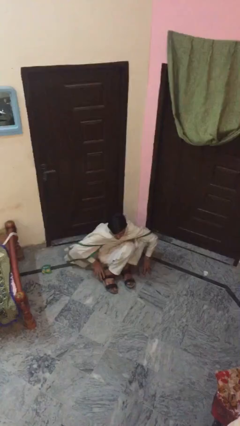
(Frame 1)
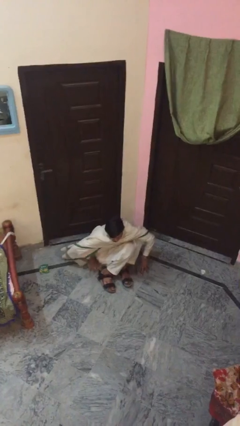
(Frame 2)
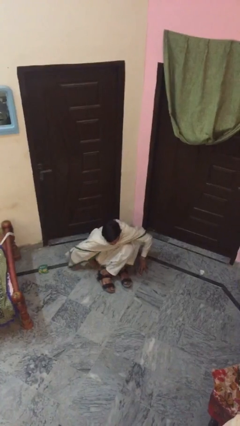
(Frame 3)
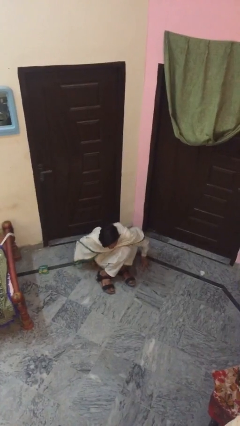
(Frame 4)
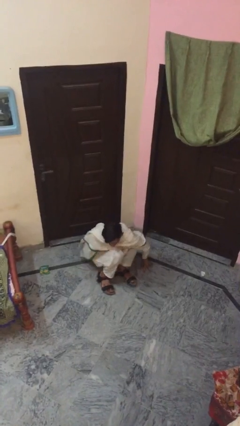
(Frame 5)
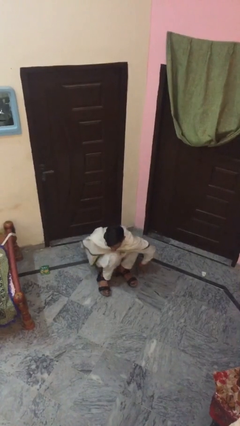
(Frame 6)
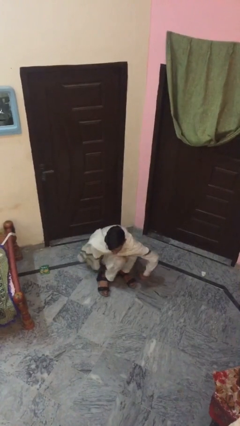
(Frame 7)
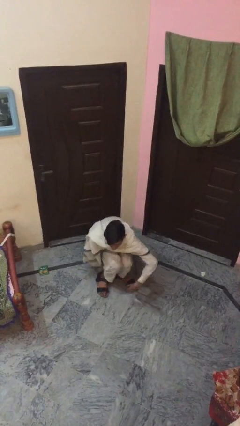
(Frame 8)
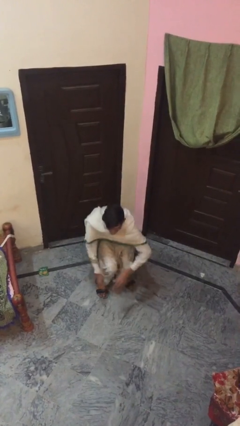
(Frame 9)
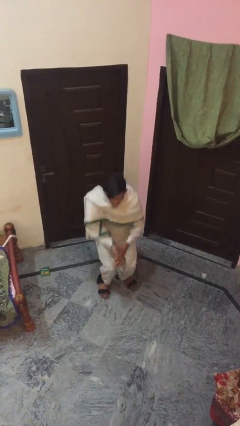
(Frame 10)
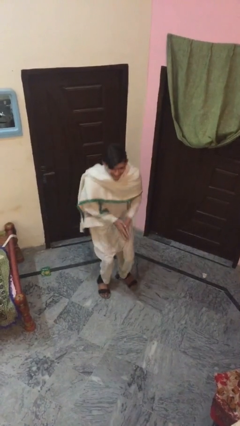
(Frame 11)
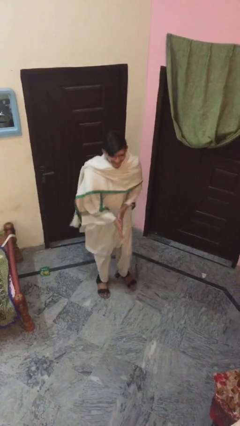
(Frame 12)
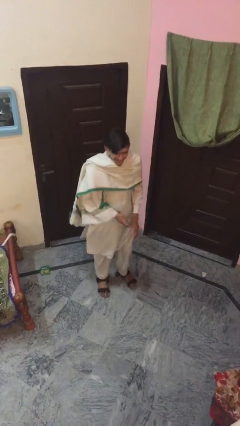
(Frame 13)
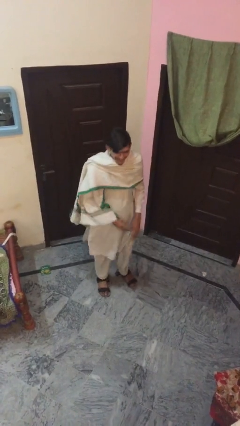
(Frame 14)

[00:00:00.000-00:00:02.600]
person stands up

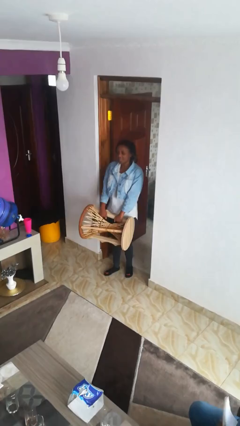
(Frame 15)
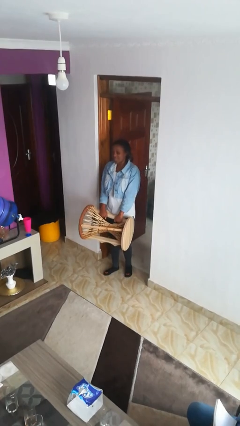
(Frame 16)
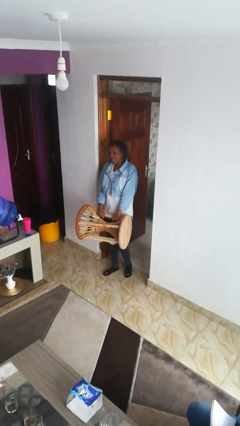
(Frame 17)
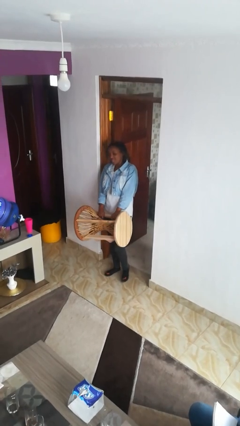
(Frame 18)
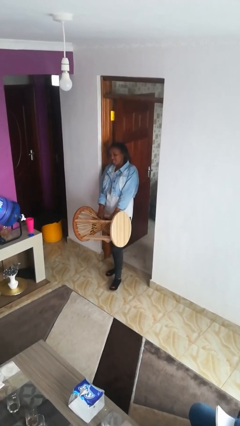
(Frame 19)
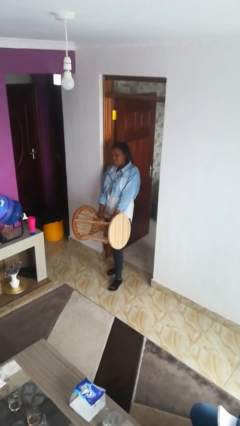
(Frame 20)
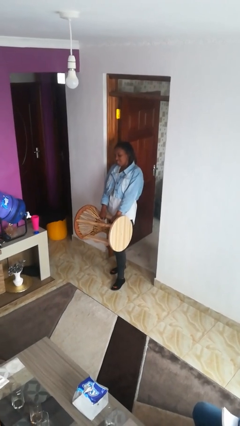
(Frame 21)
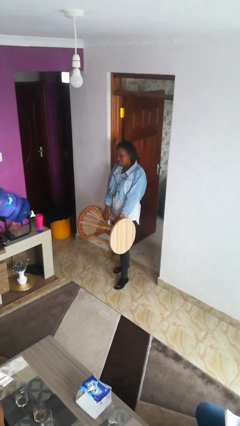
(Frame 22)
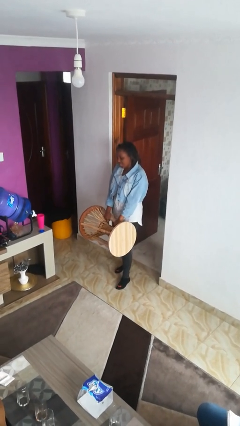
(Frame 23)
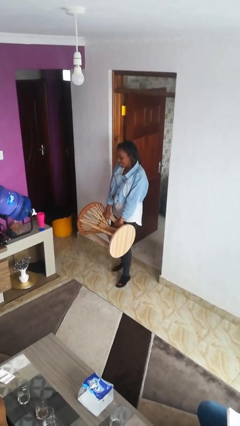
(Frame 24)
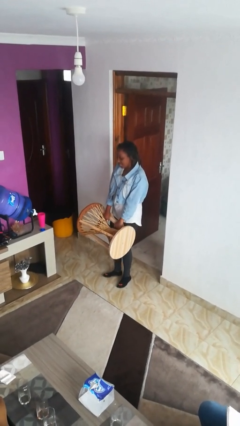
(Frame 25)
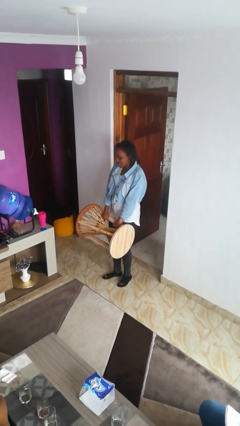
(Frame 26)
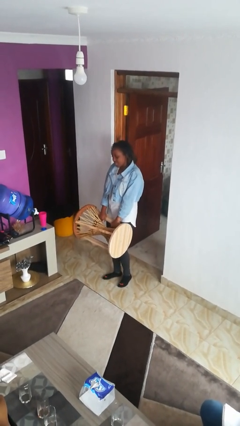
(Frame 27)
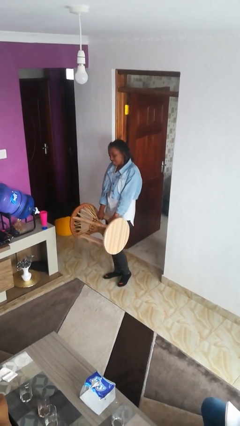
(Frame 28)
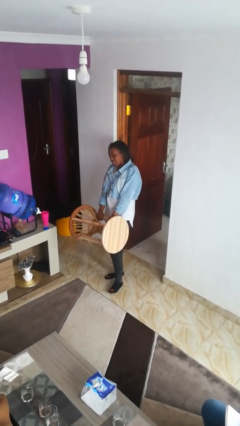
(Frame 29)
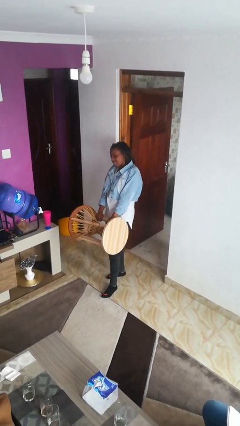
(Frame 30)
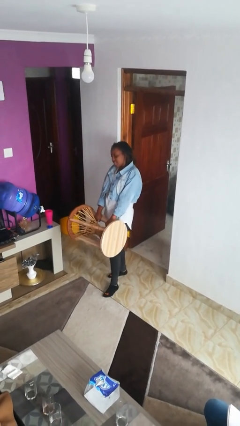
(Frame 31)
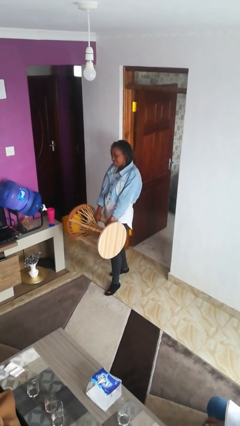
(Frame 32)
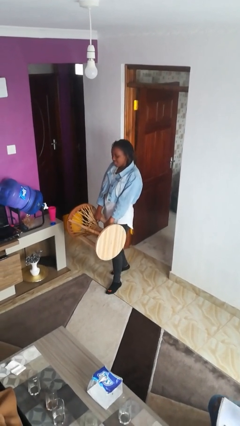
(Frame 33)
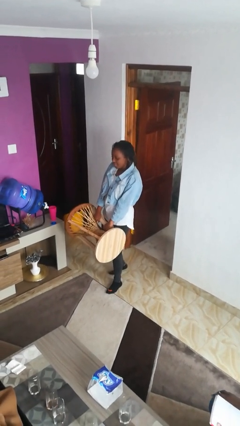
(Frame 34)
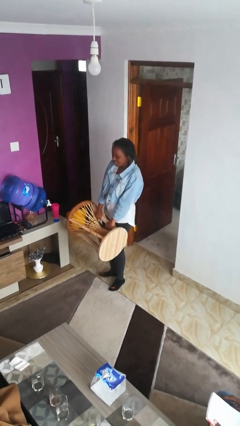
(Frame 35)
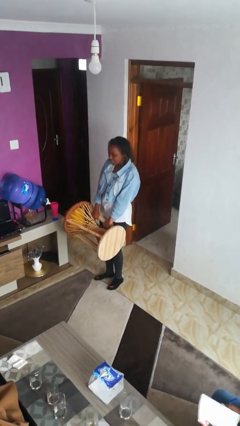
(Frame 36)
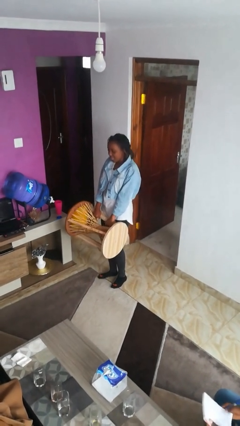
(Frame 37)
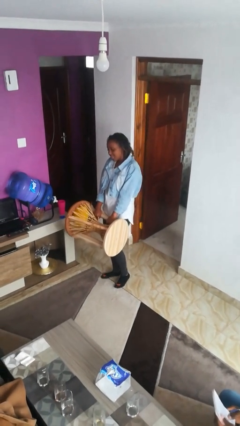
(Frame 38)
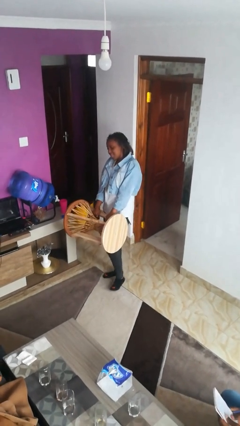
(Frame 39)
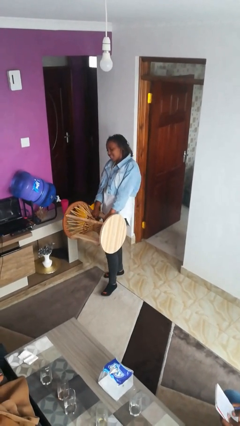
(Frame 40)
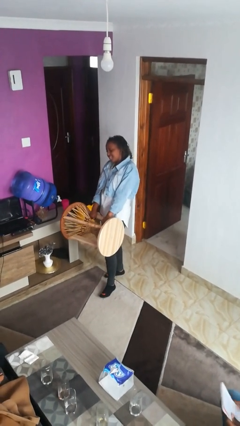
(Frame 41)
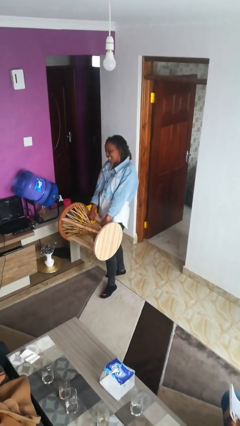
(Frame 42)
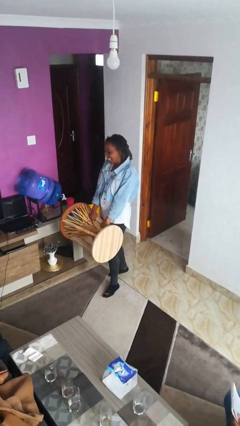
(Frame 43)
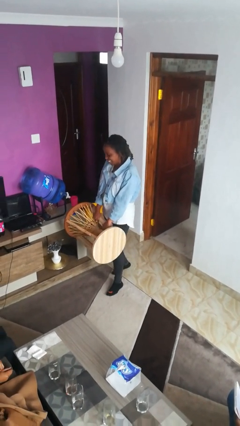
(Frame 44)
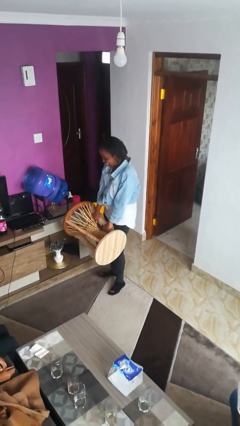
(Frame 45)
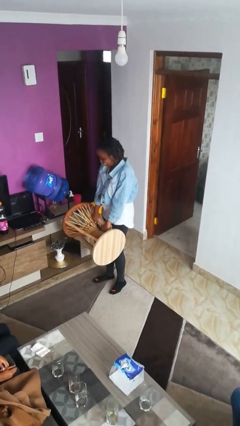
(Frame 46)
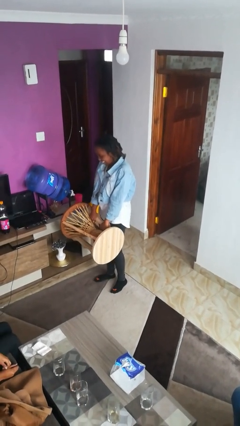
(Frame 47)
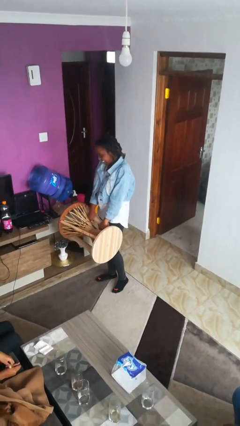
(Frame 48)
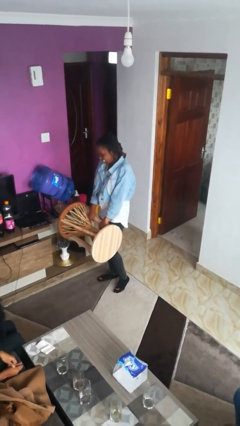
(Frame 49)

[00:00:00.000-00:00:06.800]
person carries furniture

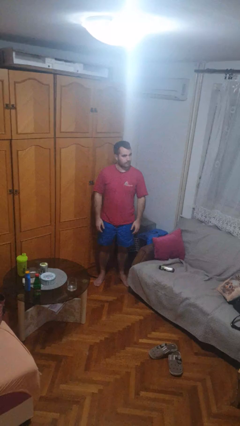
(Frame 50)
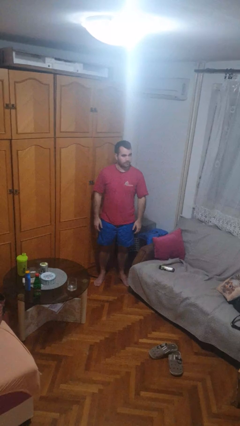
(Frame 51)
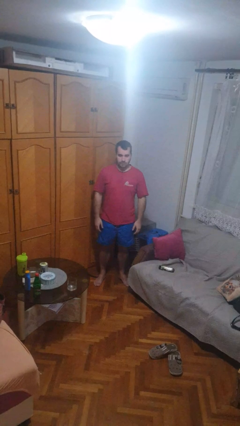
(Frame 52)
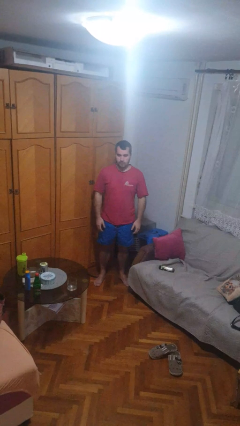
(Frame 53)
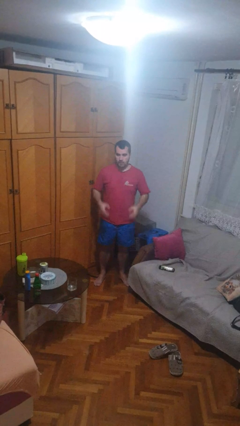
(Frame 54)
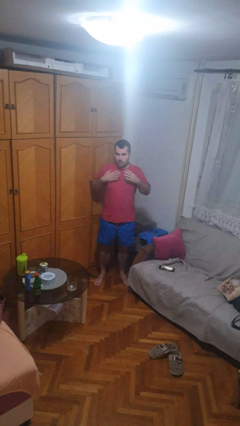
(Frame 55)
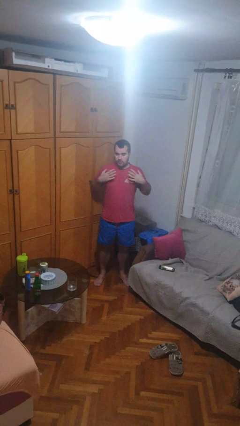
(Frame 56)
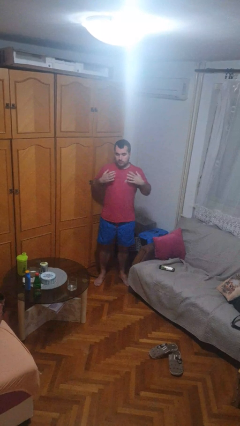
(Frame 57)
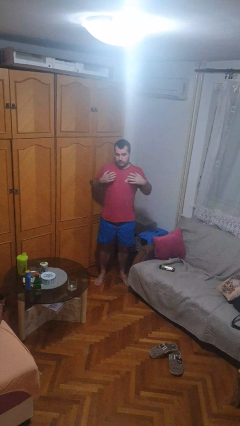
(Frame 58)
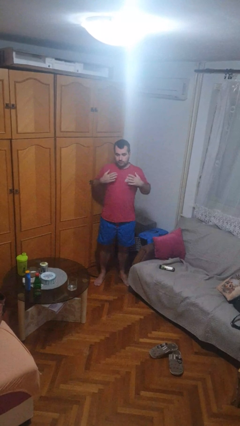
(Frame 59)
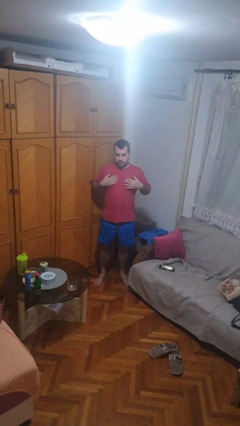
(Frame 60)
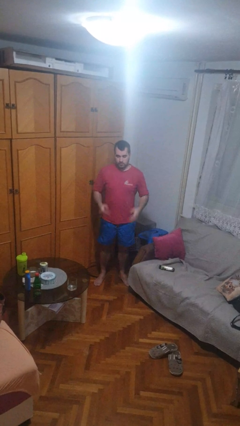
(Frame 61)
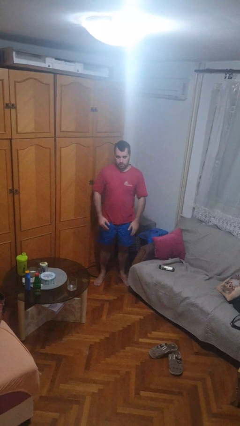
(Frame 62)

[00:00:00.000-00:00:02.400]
person drums on chest

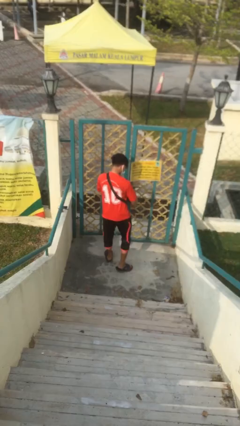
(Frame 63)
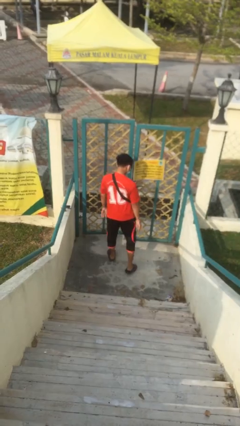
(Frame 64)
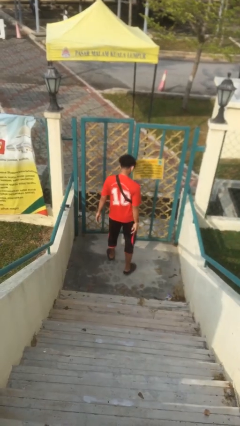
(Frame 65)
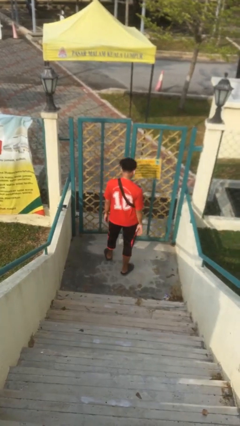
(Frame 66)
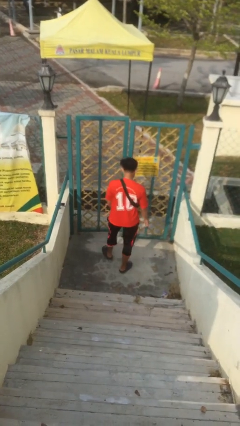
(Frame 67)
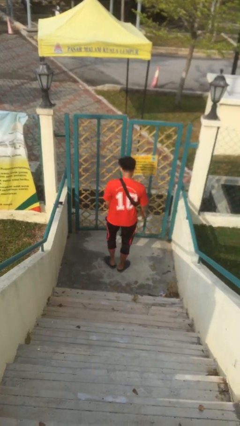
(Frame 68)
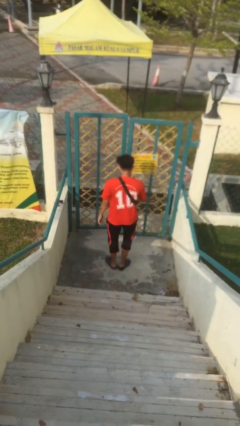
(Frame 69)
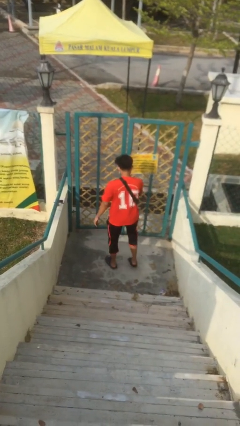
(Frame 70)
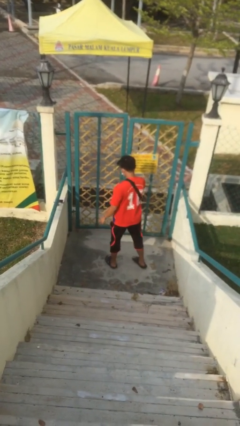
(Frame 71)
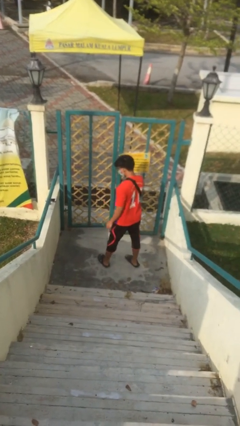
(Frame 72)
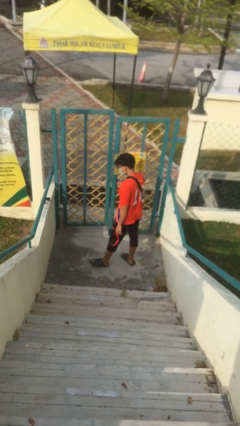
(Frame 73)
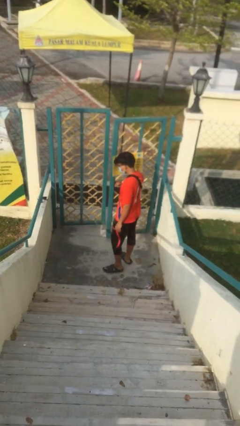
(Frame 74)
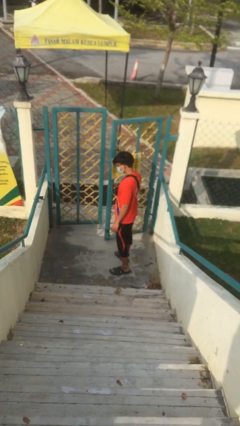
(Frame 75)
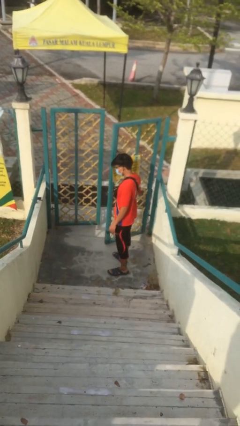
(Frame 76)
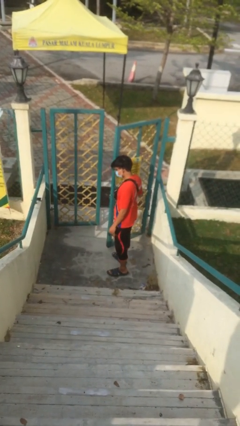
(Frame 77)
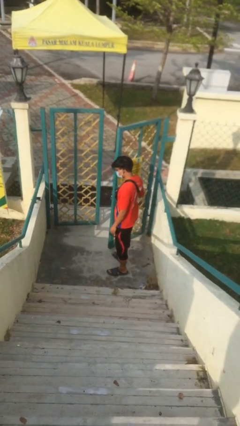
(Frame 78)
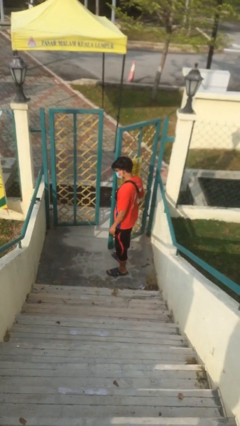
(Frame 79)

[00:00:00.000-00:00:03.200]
person opens facility door

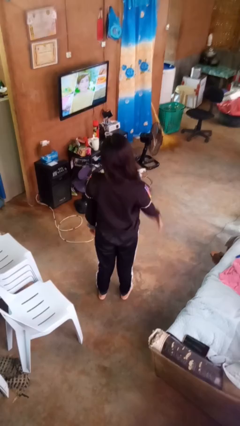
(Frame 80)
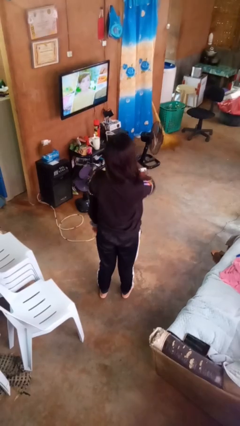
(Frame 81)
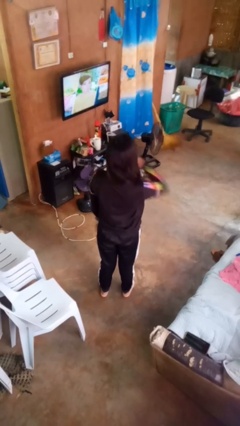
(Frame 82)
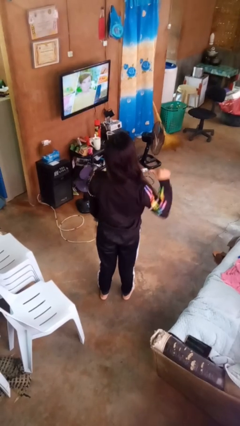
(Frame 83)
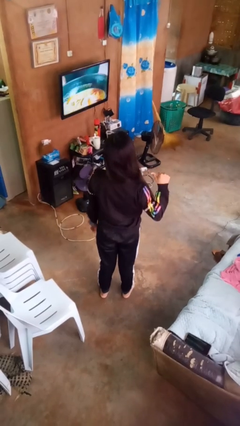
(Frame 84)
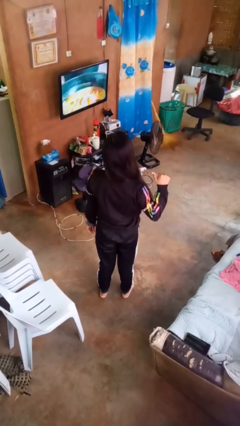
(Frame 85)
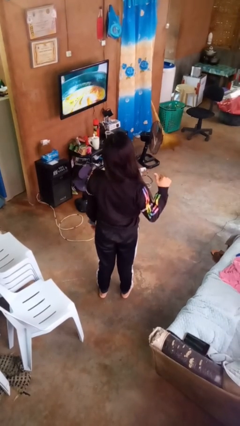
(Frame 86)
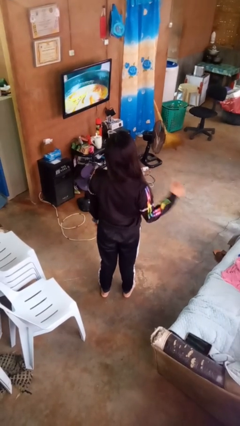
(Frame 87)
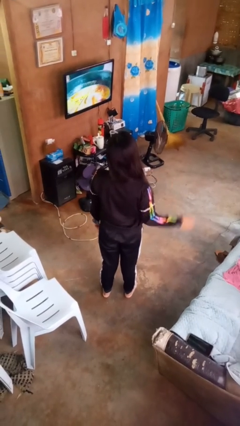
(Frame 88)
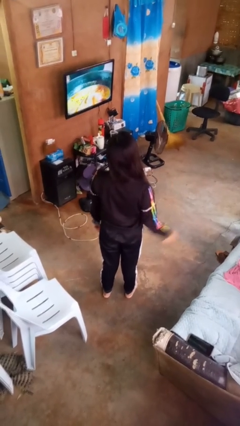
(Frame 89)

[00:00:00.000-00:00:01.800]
person gestures cut

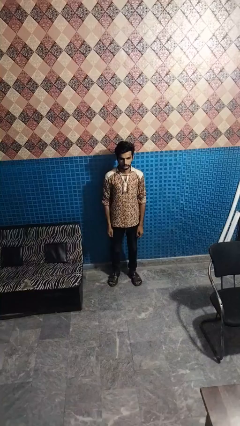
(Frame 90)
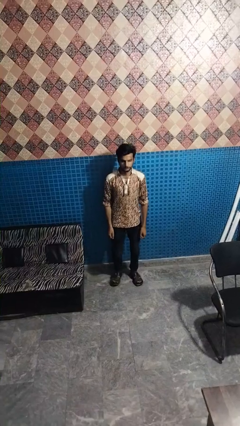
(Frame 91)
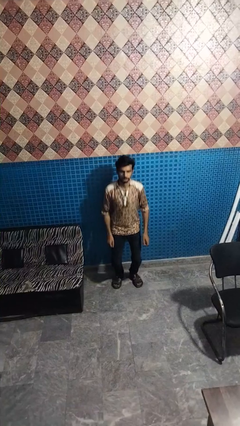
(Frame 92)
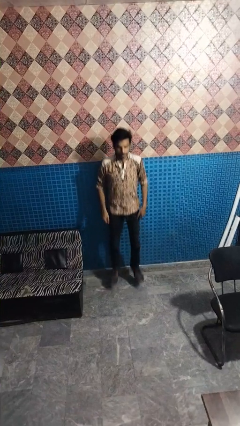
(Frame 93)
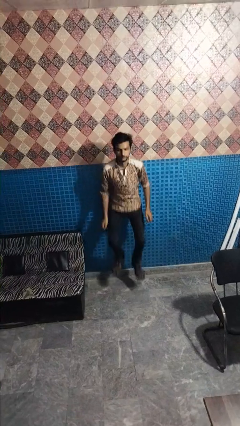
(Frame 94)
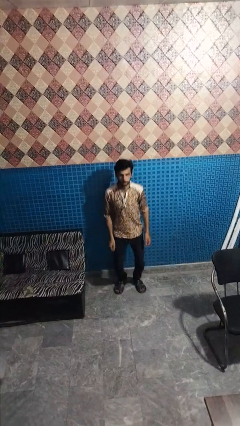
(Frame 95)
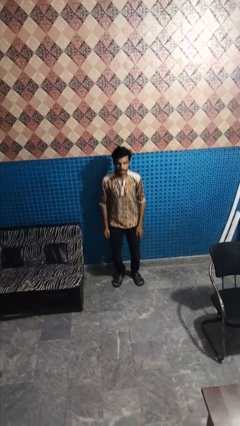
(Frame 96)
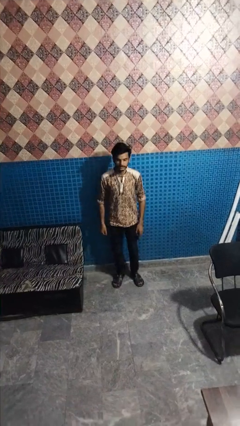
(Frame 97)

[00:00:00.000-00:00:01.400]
person jumps
